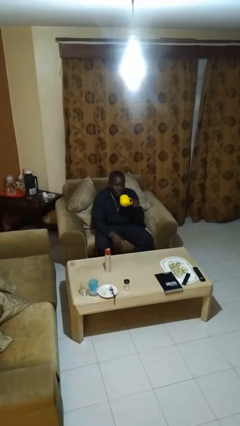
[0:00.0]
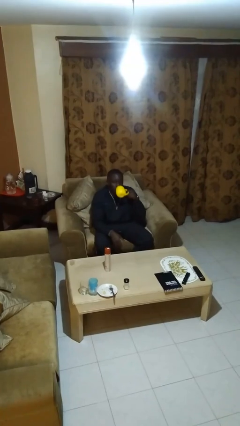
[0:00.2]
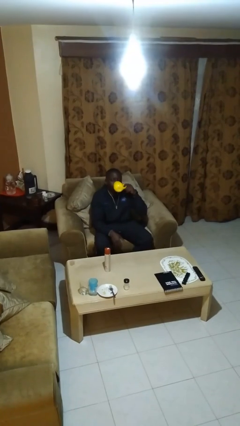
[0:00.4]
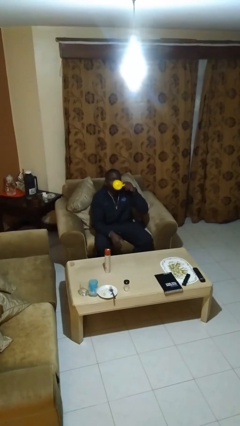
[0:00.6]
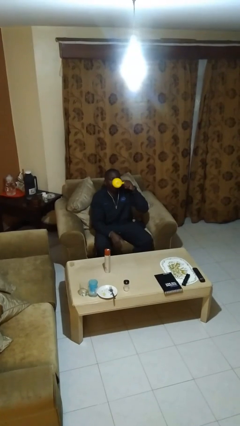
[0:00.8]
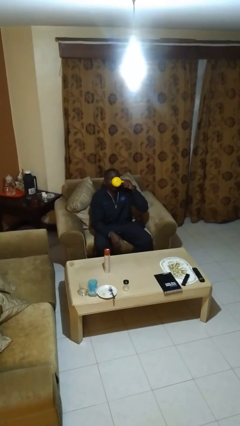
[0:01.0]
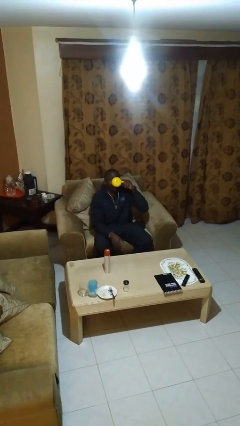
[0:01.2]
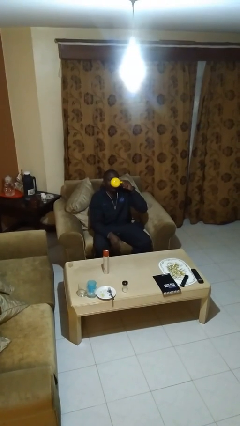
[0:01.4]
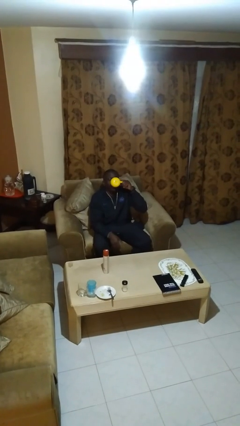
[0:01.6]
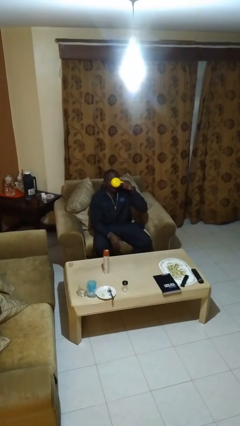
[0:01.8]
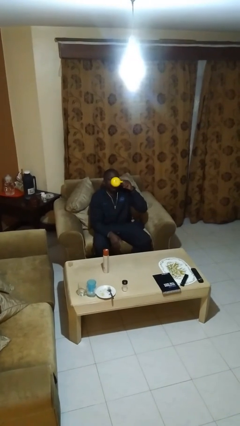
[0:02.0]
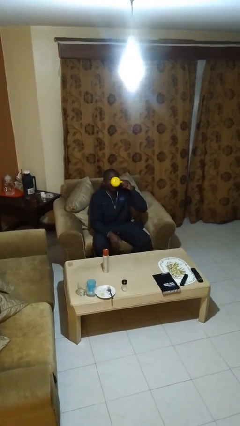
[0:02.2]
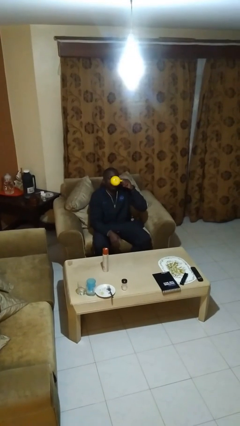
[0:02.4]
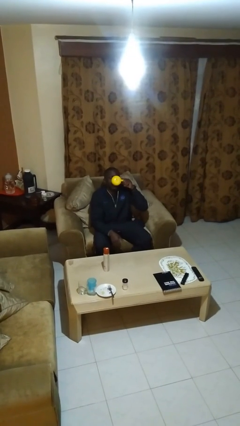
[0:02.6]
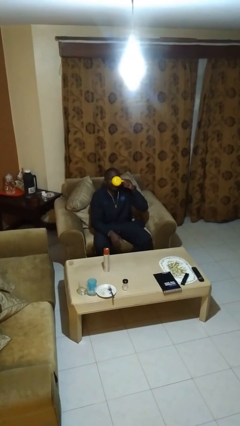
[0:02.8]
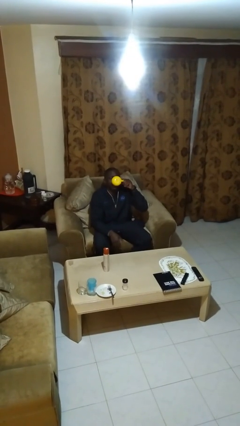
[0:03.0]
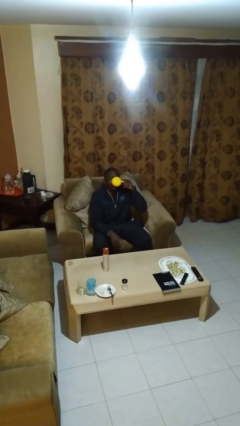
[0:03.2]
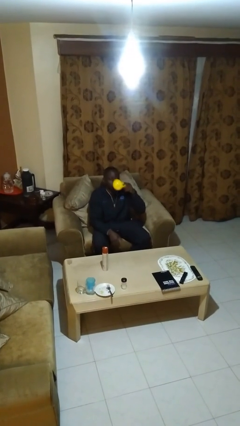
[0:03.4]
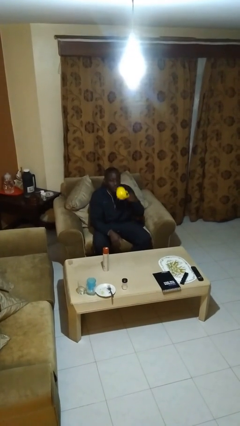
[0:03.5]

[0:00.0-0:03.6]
person drinks from mug

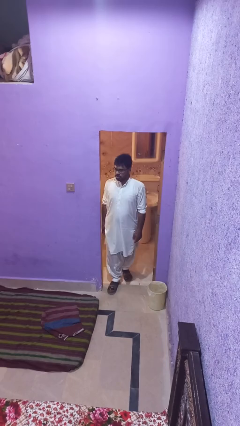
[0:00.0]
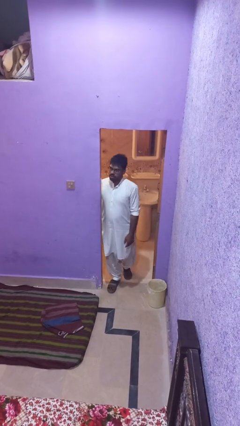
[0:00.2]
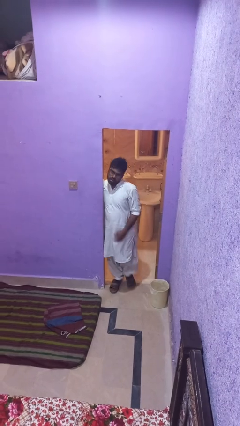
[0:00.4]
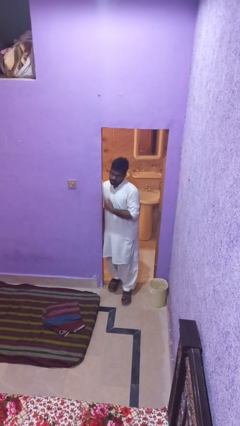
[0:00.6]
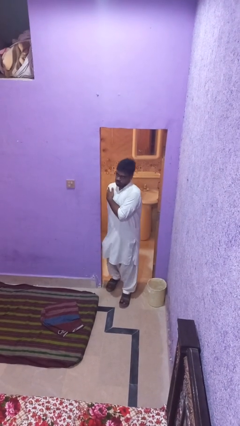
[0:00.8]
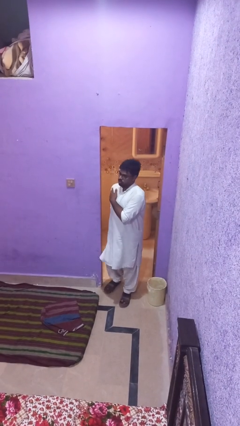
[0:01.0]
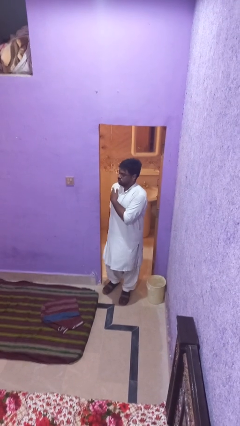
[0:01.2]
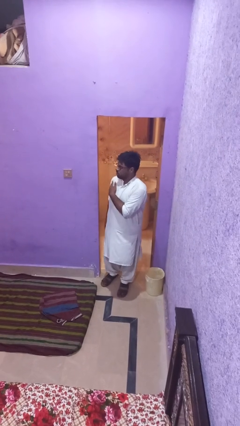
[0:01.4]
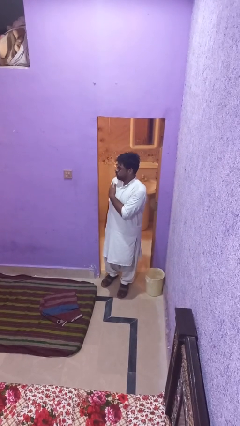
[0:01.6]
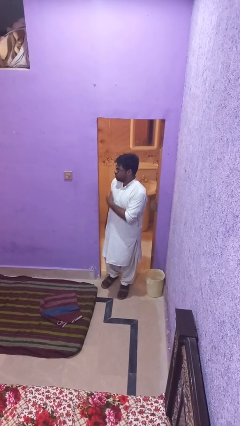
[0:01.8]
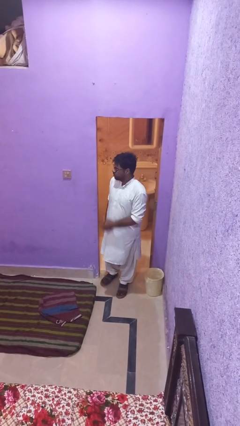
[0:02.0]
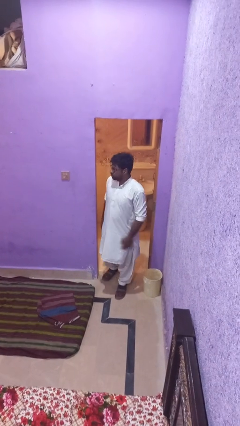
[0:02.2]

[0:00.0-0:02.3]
person bumps into wall

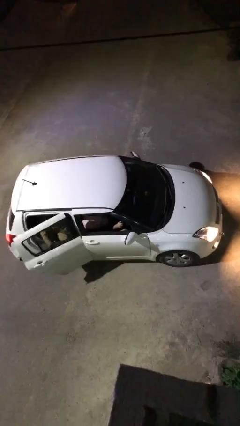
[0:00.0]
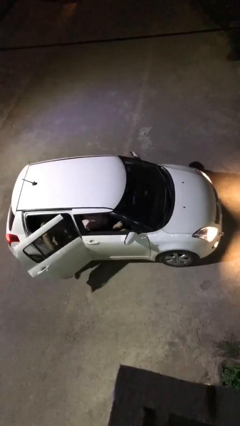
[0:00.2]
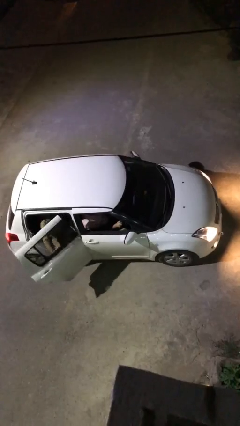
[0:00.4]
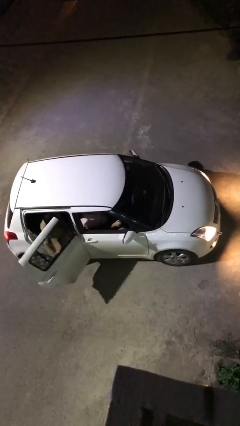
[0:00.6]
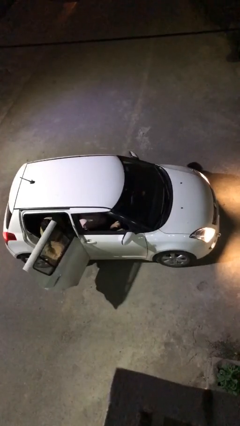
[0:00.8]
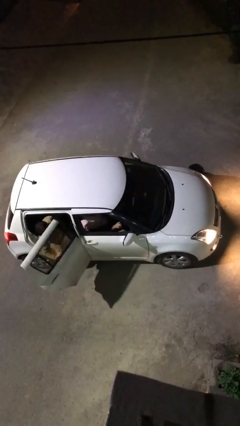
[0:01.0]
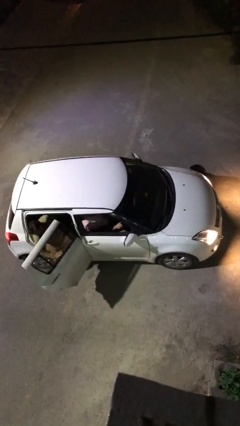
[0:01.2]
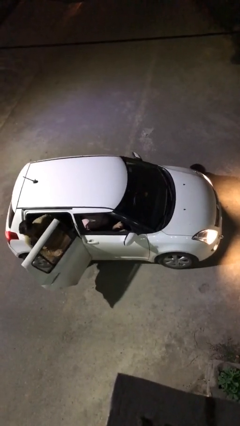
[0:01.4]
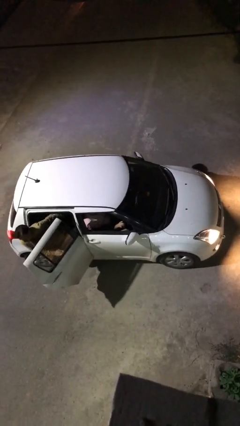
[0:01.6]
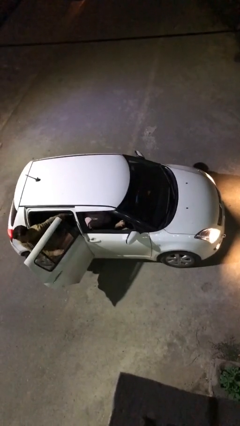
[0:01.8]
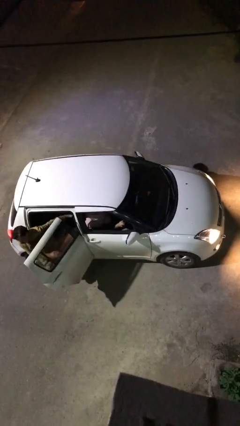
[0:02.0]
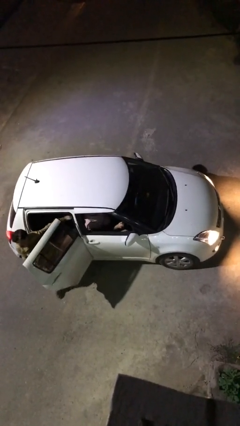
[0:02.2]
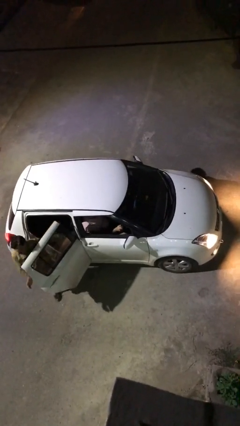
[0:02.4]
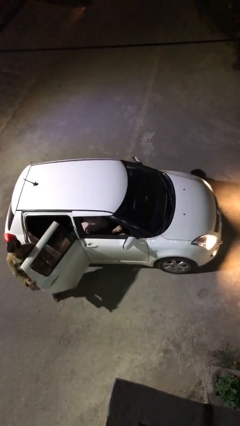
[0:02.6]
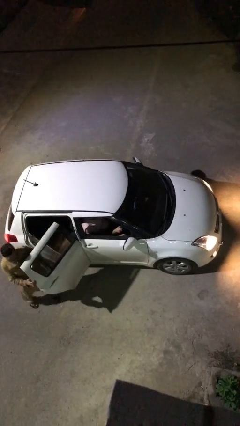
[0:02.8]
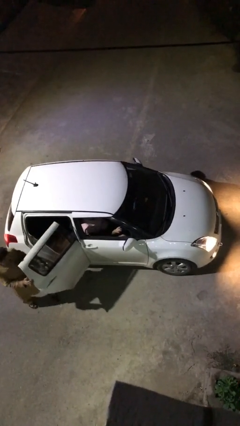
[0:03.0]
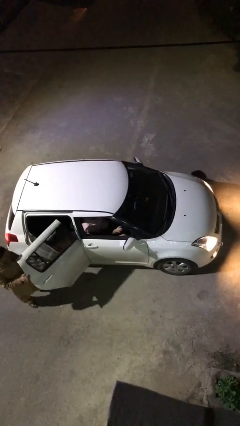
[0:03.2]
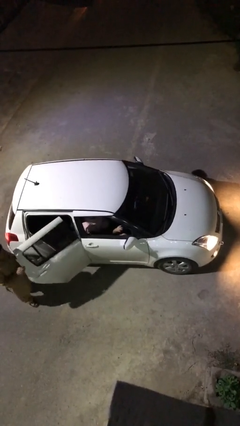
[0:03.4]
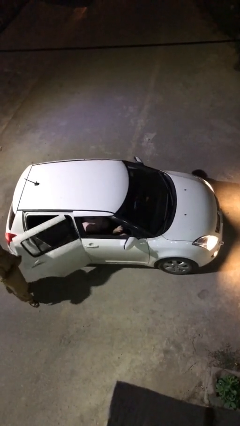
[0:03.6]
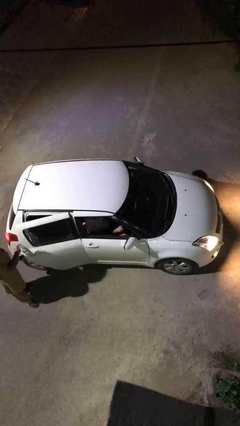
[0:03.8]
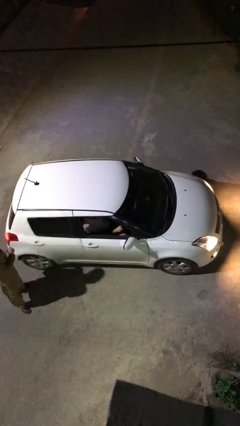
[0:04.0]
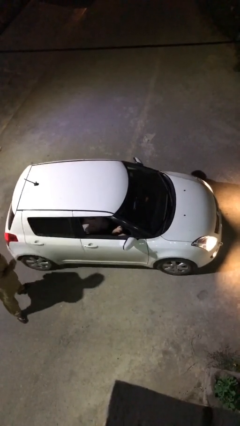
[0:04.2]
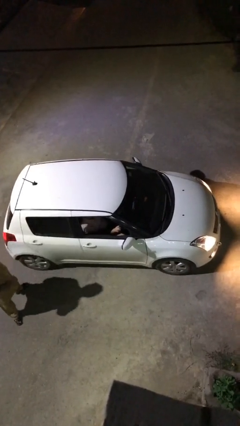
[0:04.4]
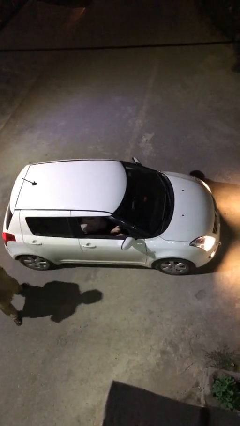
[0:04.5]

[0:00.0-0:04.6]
car drops off person

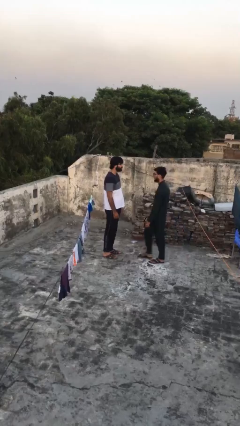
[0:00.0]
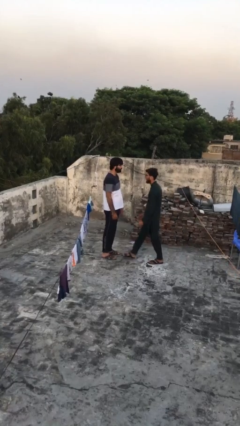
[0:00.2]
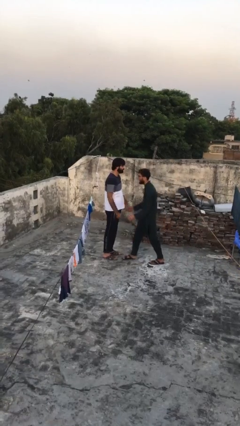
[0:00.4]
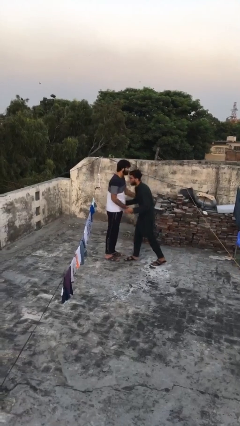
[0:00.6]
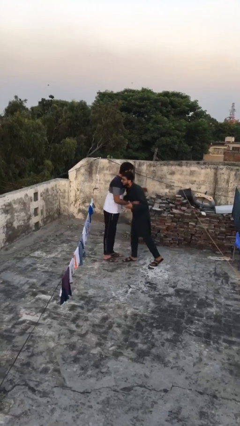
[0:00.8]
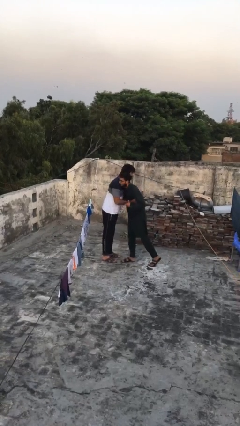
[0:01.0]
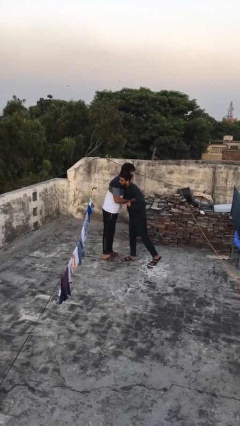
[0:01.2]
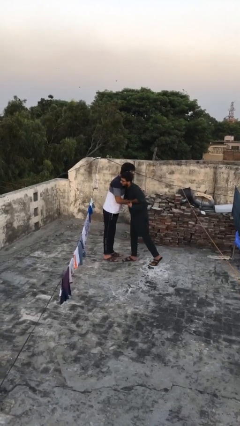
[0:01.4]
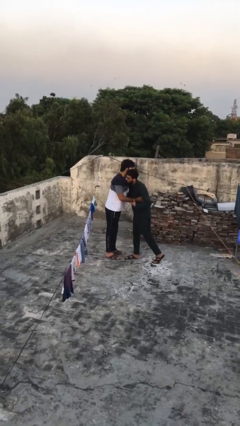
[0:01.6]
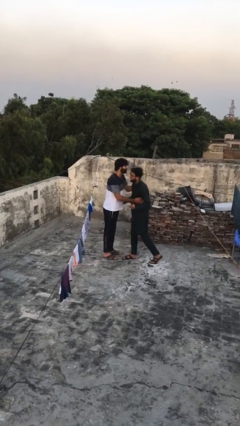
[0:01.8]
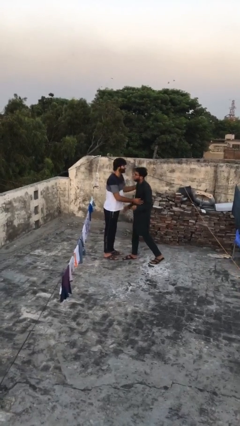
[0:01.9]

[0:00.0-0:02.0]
person embraces person

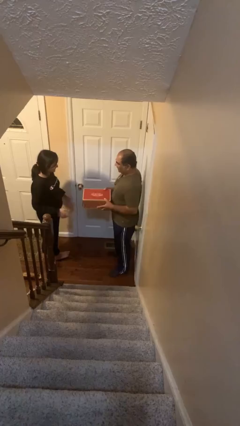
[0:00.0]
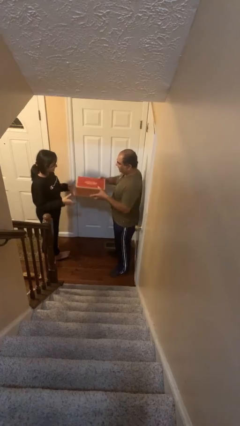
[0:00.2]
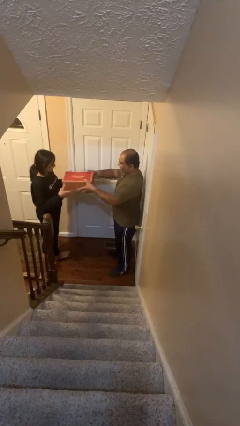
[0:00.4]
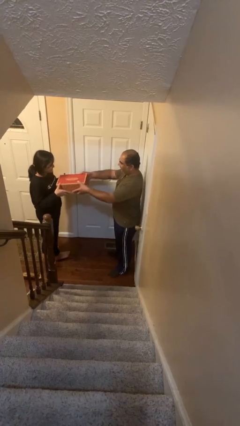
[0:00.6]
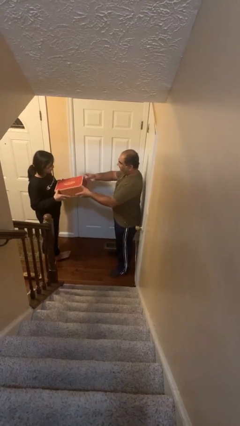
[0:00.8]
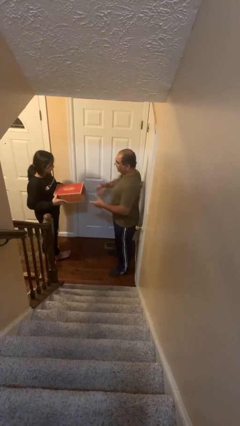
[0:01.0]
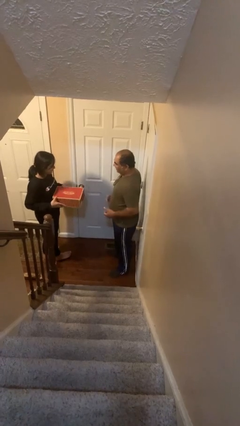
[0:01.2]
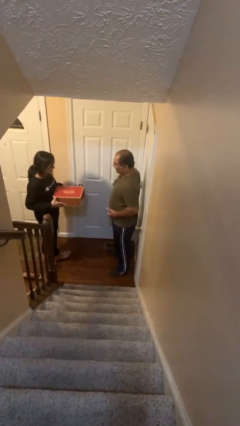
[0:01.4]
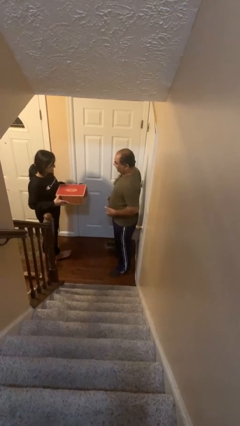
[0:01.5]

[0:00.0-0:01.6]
person transfers object to person

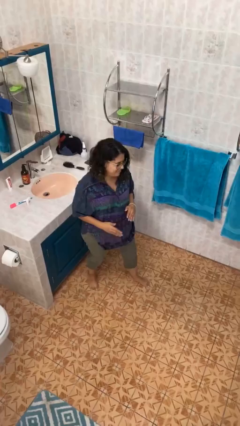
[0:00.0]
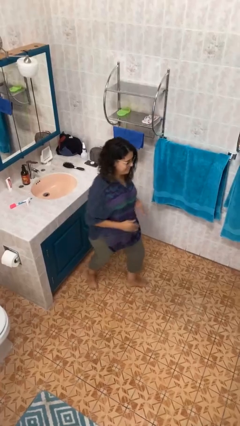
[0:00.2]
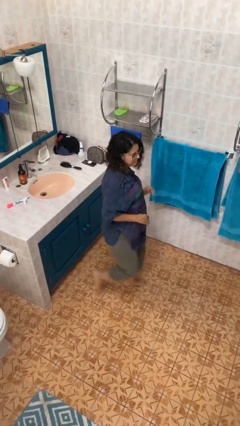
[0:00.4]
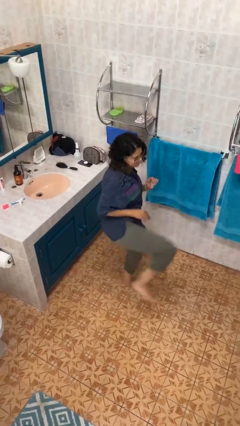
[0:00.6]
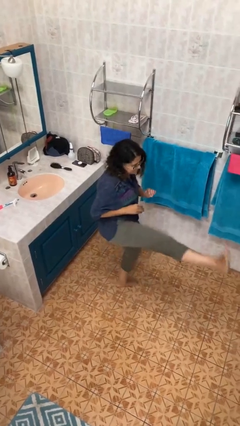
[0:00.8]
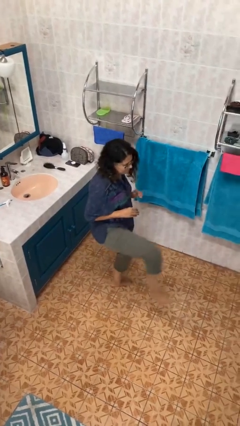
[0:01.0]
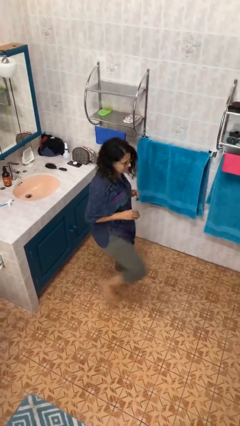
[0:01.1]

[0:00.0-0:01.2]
person karate kicks

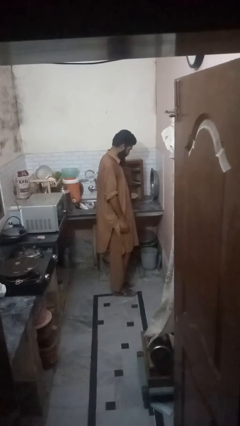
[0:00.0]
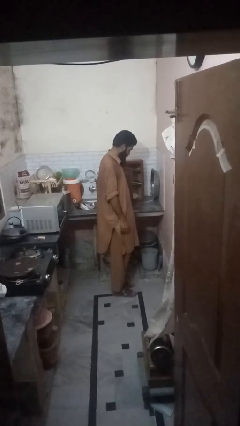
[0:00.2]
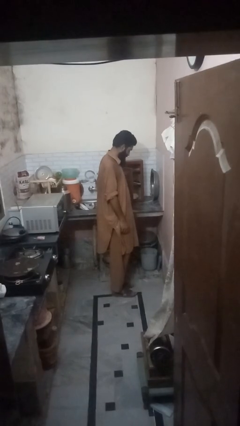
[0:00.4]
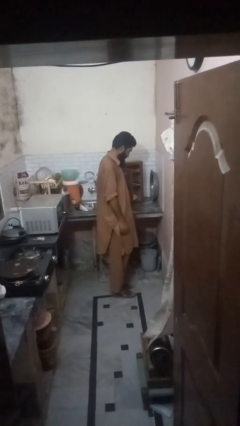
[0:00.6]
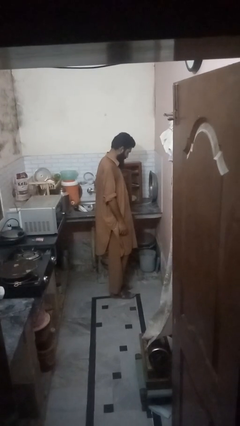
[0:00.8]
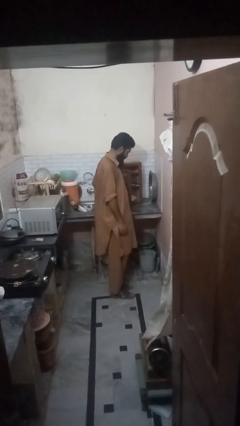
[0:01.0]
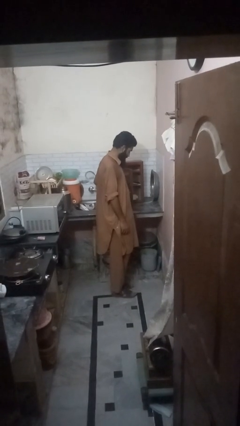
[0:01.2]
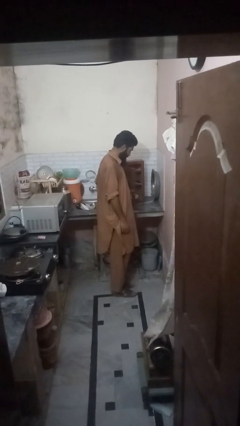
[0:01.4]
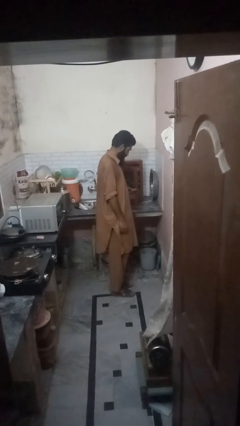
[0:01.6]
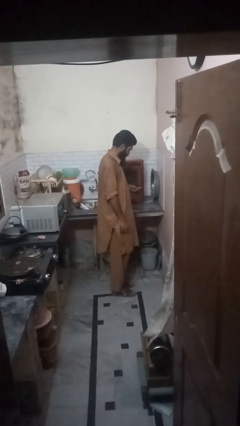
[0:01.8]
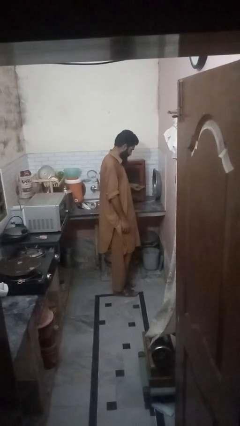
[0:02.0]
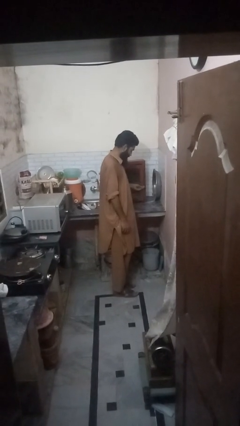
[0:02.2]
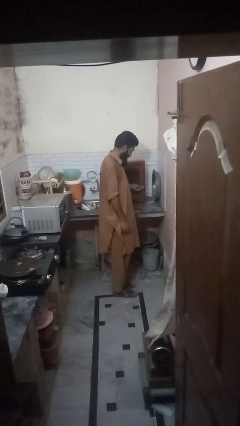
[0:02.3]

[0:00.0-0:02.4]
person closes cabinet
